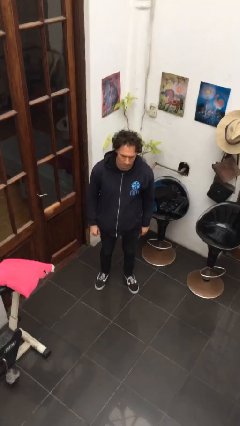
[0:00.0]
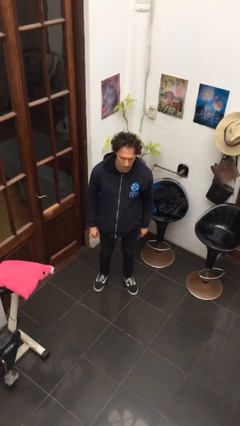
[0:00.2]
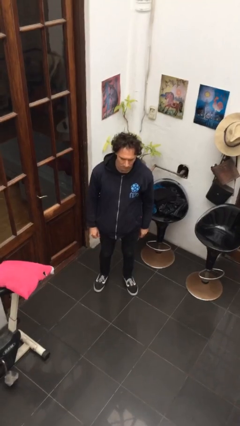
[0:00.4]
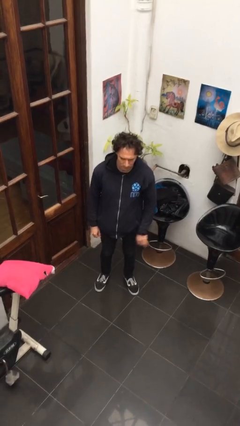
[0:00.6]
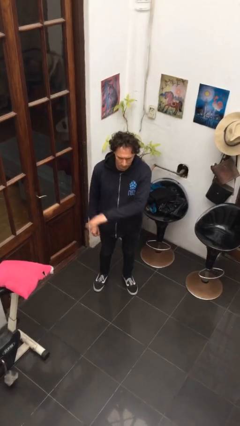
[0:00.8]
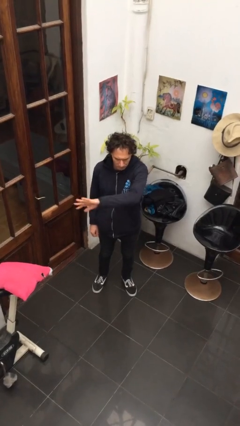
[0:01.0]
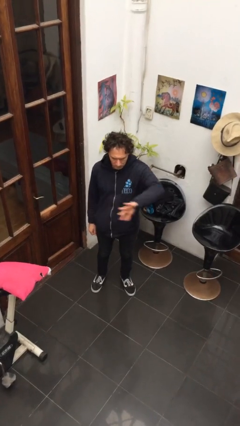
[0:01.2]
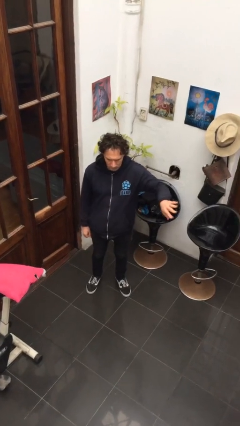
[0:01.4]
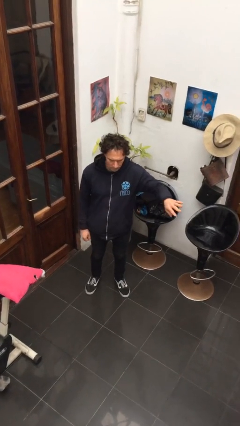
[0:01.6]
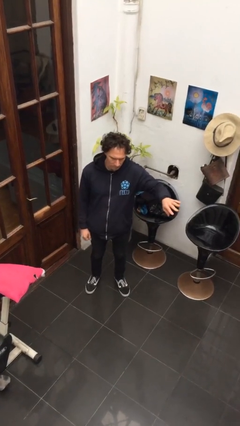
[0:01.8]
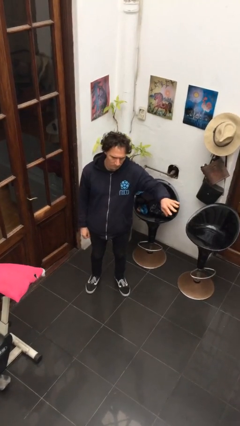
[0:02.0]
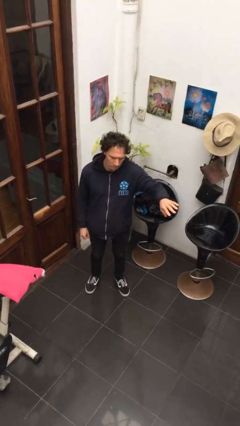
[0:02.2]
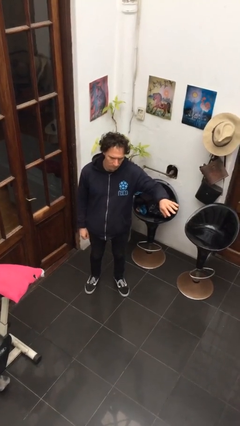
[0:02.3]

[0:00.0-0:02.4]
person gestures swipe left

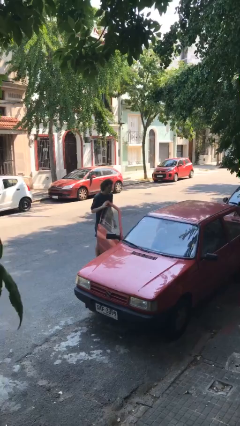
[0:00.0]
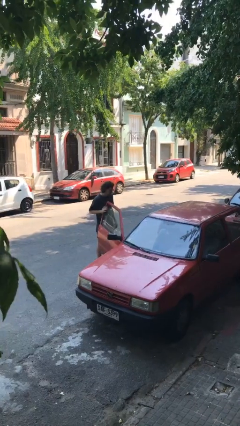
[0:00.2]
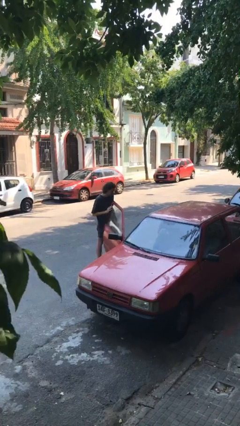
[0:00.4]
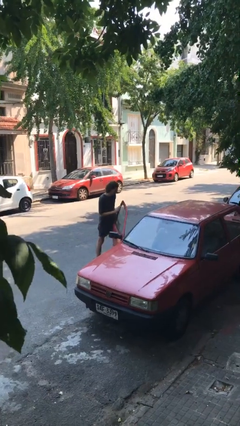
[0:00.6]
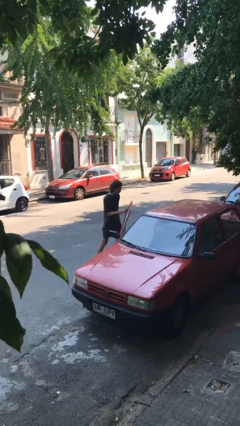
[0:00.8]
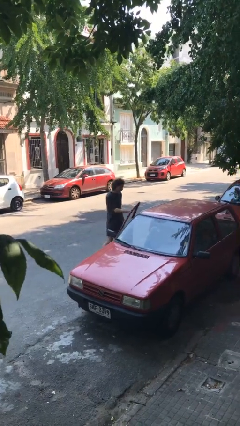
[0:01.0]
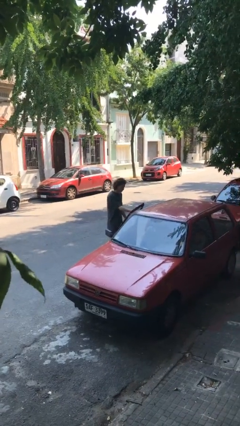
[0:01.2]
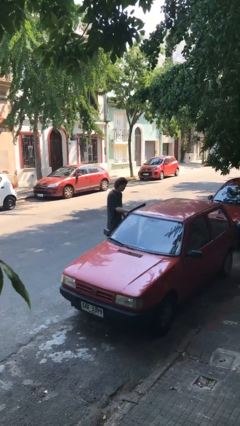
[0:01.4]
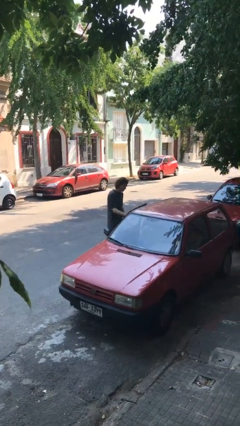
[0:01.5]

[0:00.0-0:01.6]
person closes car door

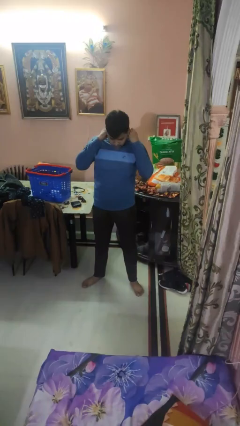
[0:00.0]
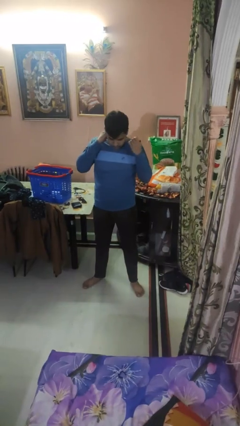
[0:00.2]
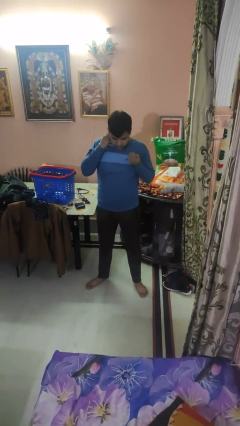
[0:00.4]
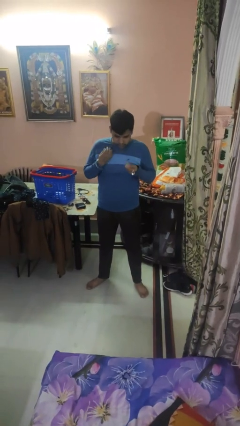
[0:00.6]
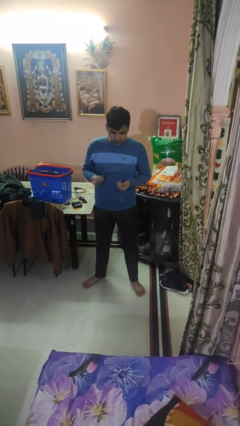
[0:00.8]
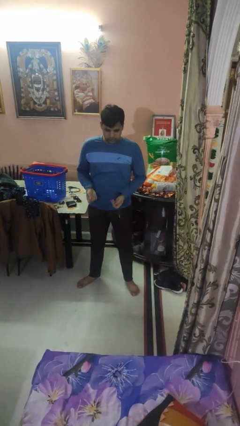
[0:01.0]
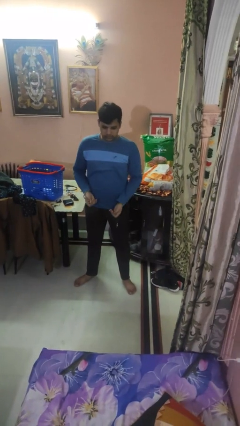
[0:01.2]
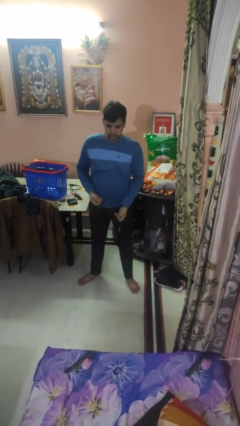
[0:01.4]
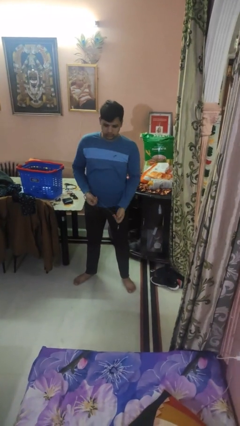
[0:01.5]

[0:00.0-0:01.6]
person takes off necklace

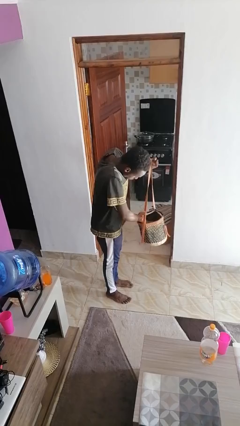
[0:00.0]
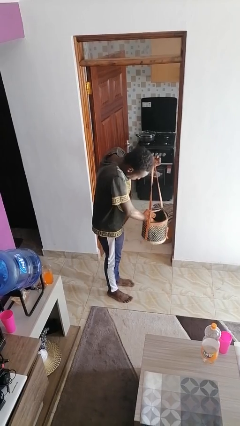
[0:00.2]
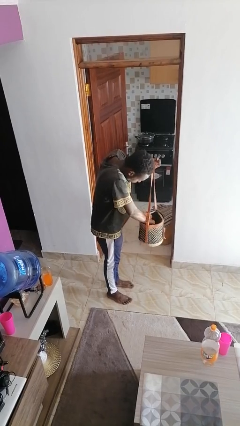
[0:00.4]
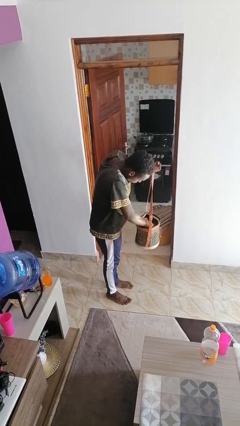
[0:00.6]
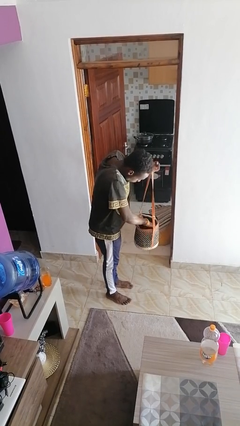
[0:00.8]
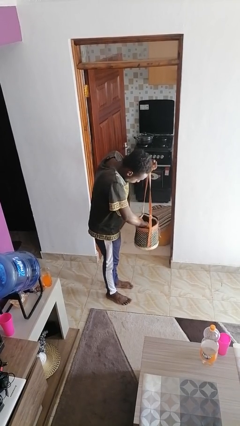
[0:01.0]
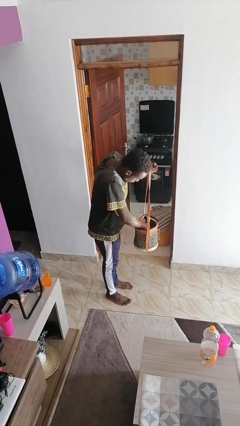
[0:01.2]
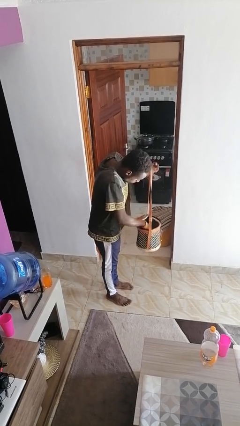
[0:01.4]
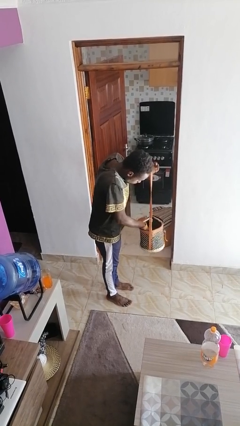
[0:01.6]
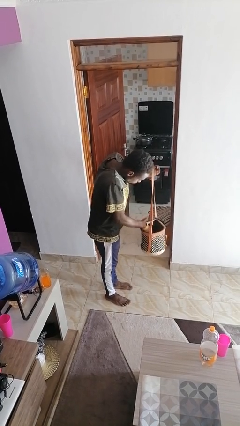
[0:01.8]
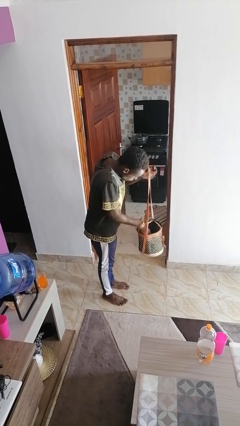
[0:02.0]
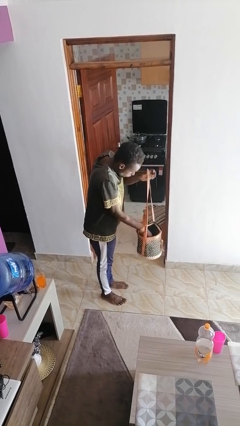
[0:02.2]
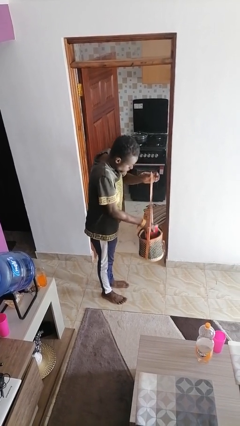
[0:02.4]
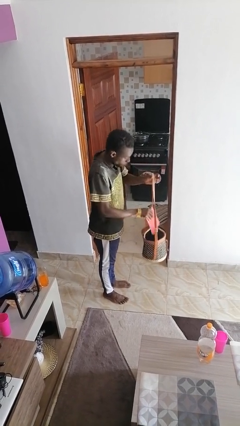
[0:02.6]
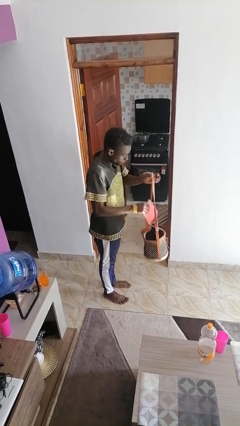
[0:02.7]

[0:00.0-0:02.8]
person searches in purse

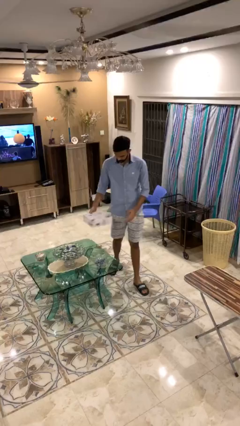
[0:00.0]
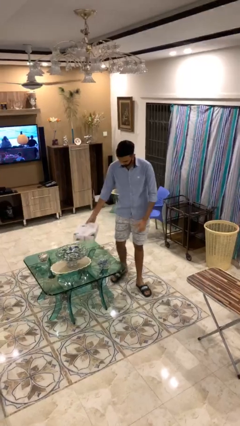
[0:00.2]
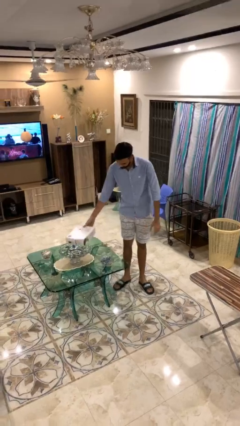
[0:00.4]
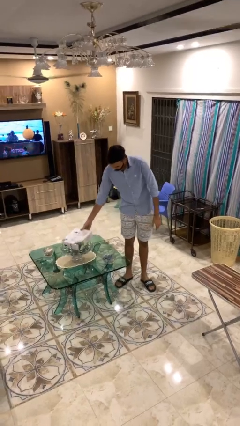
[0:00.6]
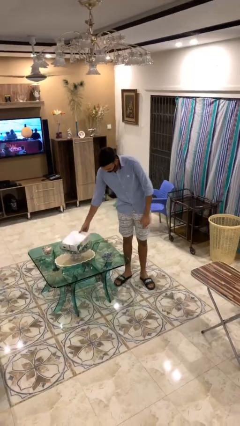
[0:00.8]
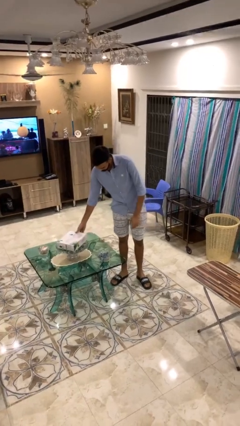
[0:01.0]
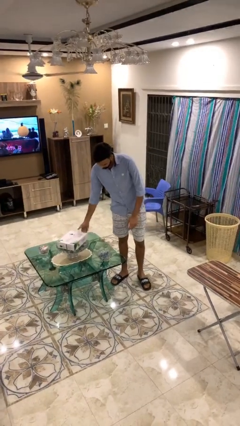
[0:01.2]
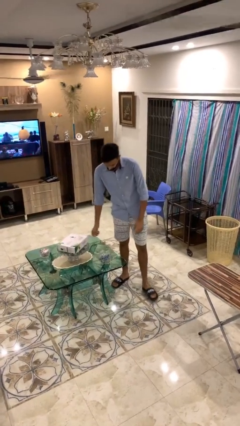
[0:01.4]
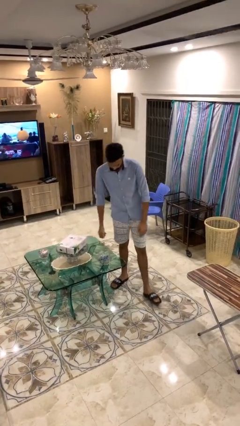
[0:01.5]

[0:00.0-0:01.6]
person puts down object on table

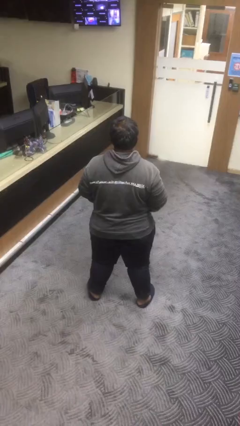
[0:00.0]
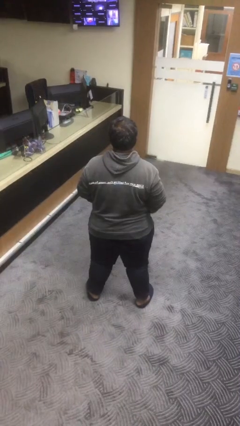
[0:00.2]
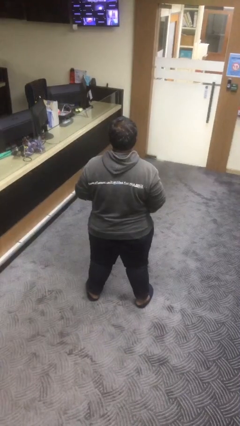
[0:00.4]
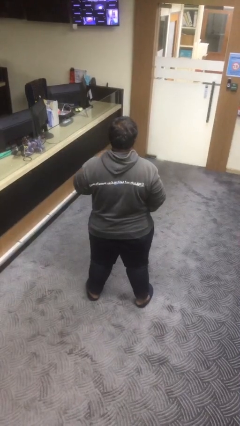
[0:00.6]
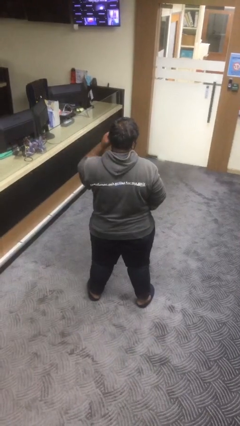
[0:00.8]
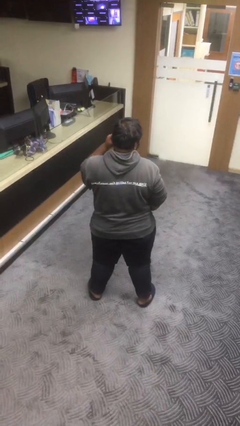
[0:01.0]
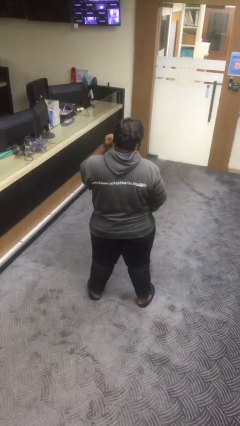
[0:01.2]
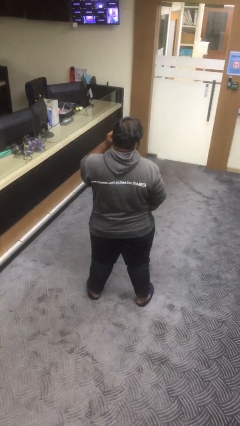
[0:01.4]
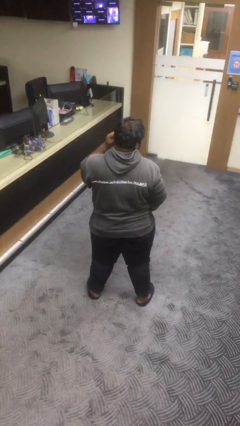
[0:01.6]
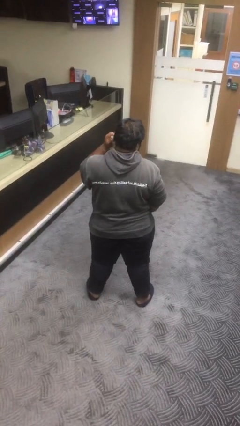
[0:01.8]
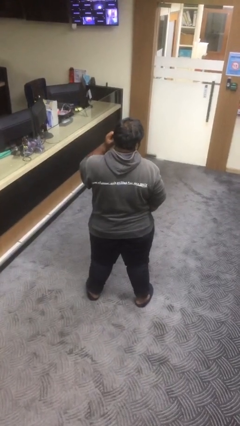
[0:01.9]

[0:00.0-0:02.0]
person touches earlobe

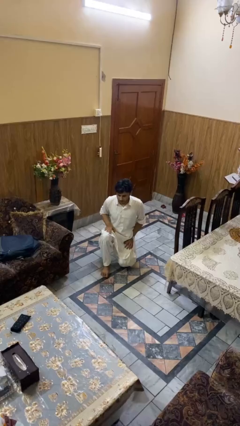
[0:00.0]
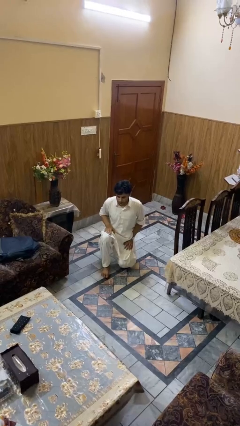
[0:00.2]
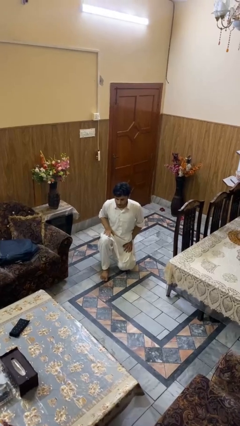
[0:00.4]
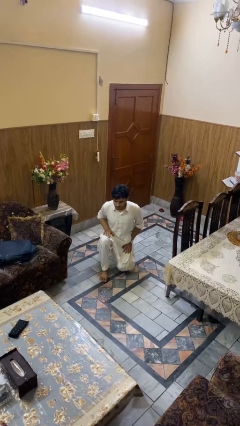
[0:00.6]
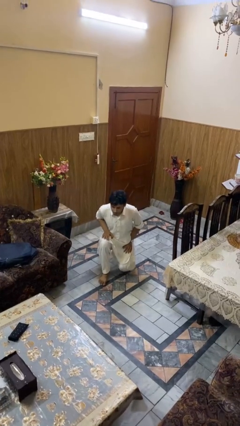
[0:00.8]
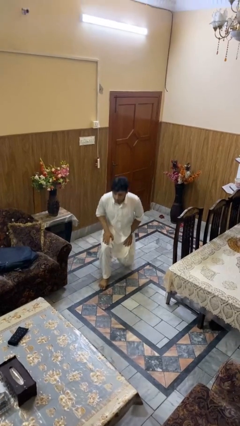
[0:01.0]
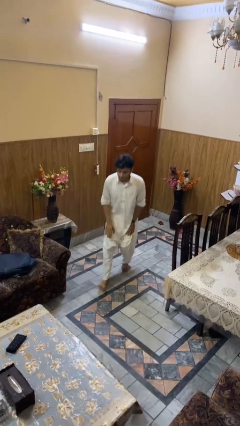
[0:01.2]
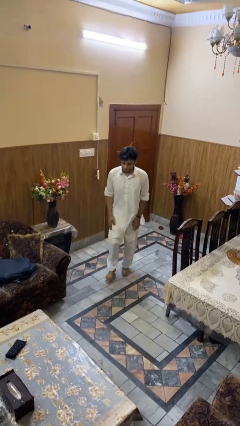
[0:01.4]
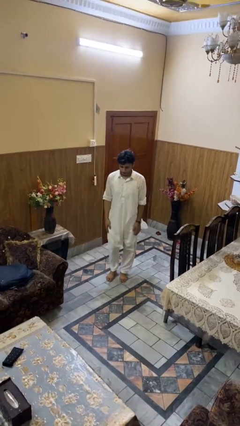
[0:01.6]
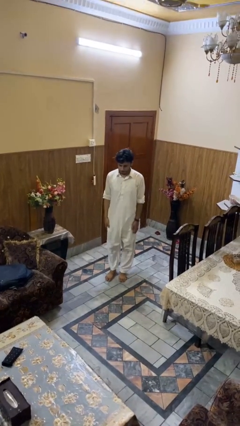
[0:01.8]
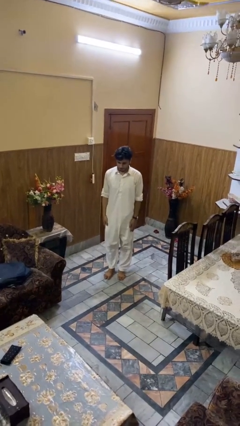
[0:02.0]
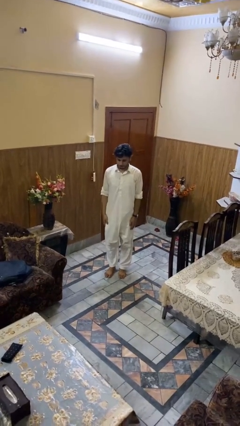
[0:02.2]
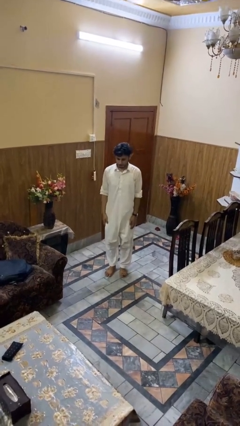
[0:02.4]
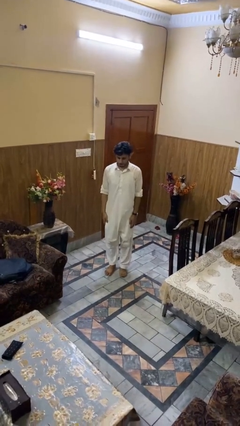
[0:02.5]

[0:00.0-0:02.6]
person stands up from floor

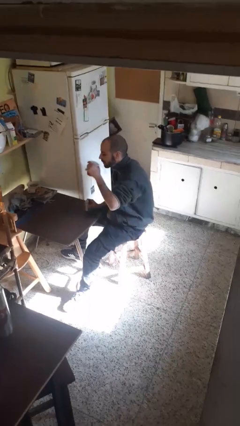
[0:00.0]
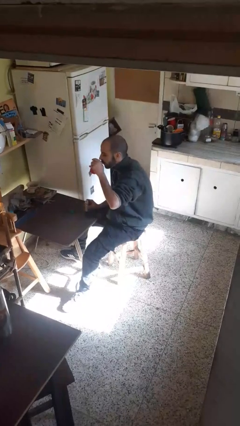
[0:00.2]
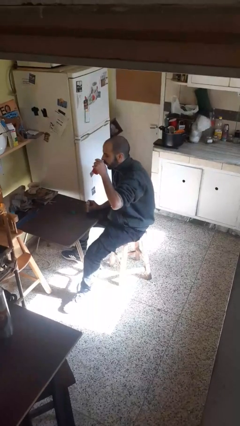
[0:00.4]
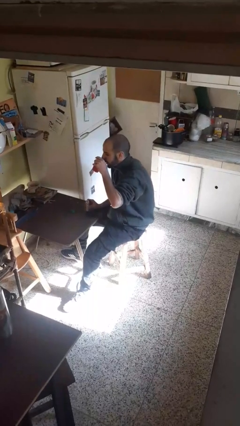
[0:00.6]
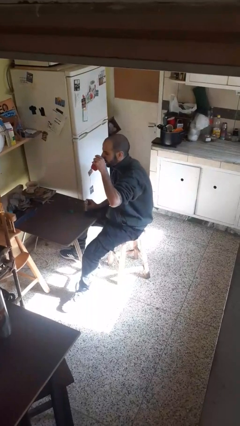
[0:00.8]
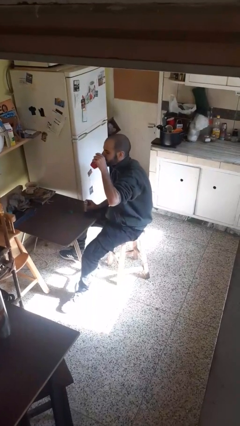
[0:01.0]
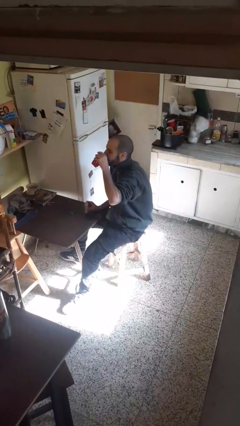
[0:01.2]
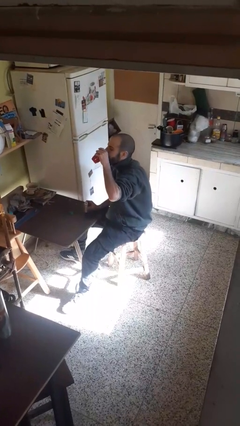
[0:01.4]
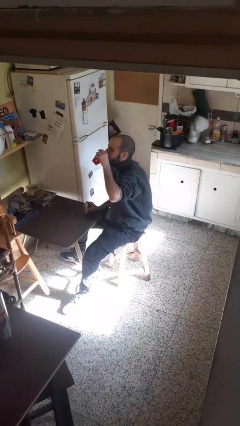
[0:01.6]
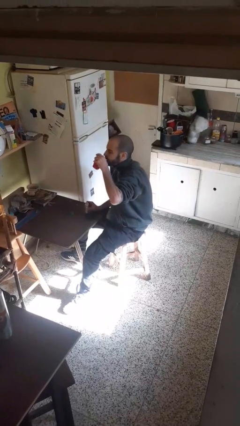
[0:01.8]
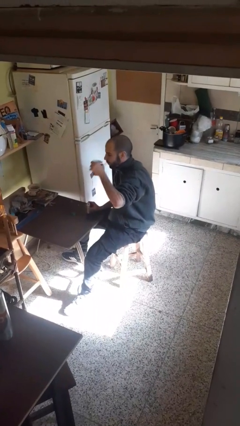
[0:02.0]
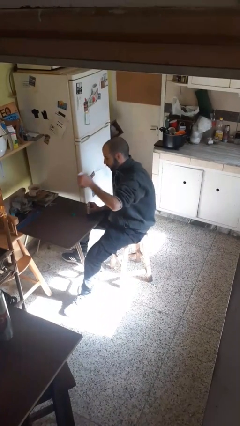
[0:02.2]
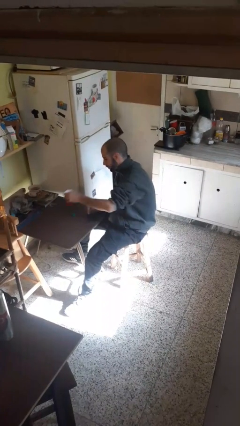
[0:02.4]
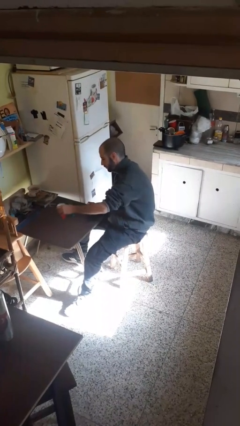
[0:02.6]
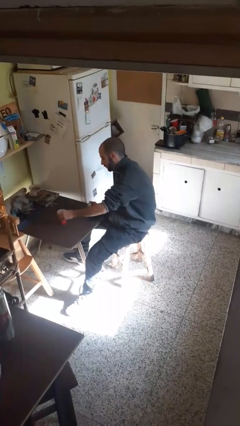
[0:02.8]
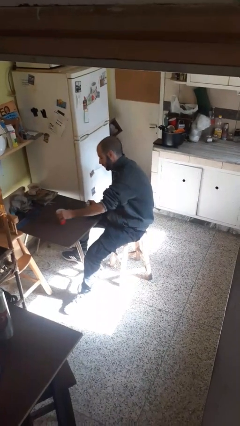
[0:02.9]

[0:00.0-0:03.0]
person drinks from cup
